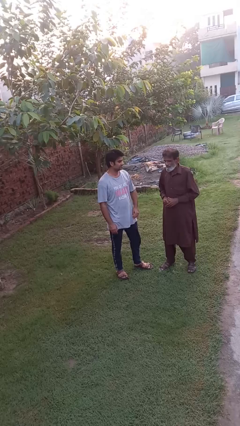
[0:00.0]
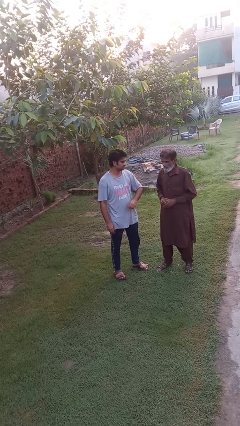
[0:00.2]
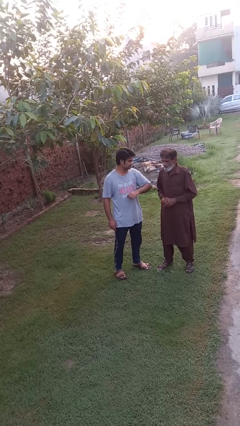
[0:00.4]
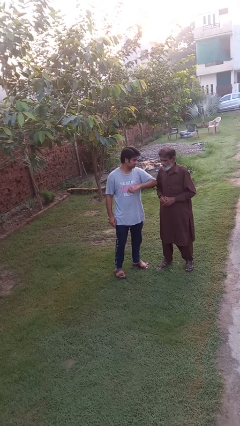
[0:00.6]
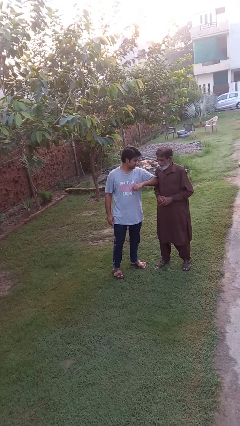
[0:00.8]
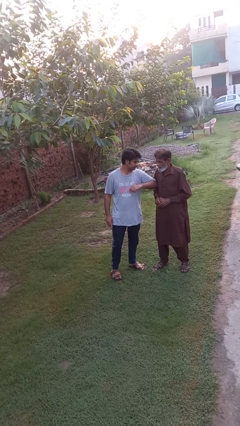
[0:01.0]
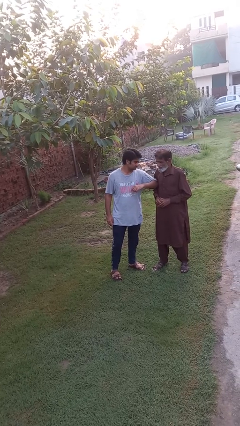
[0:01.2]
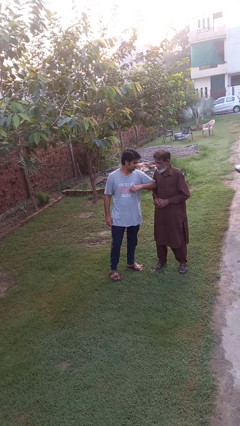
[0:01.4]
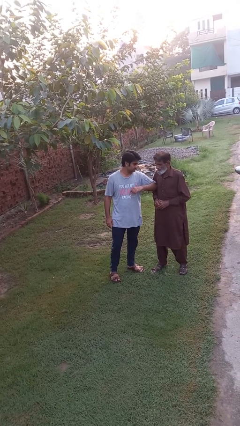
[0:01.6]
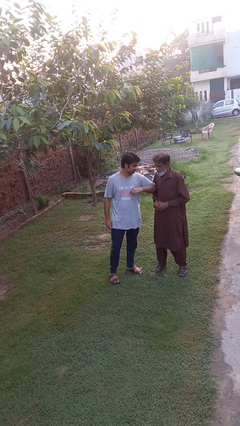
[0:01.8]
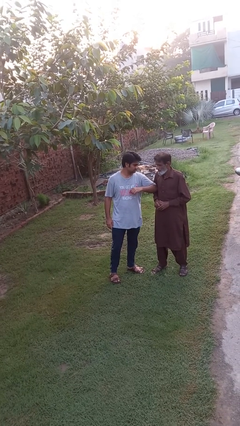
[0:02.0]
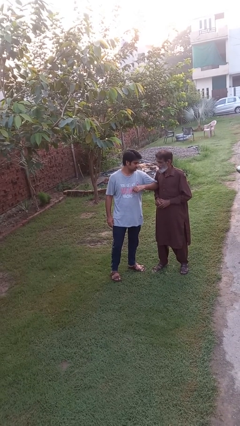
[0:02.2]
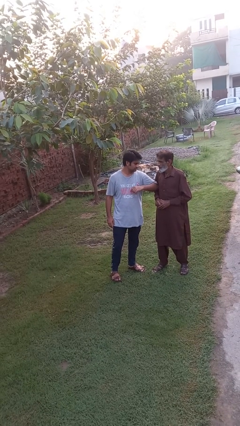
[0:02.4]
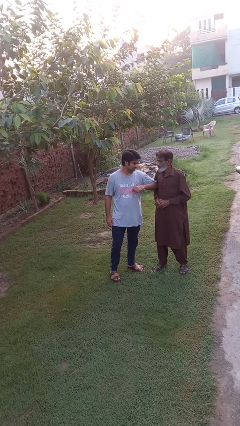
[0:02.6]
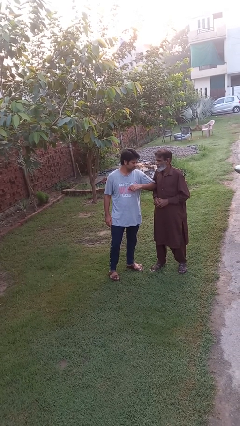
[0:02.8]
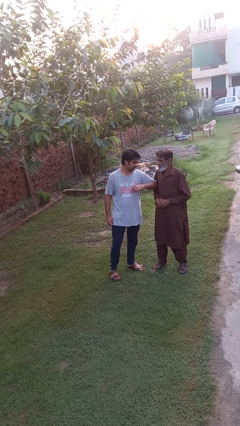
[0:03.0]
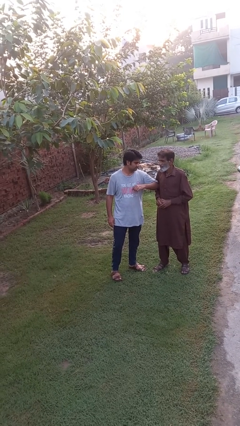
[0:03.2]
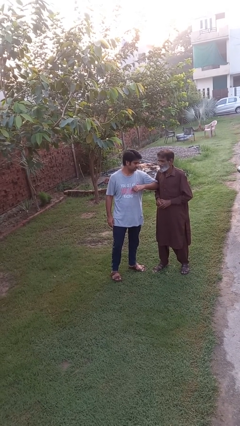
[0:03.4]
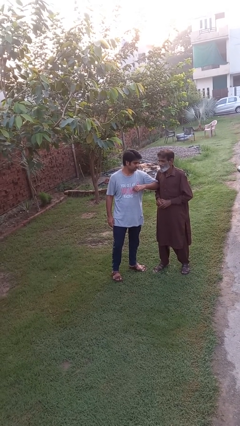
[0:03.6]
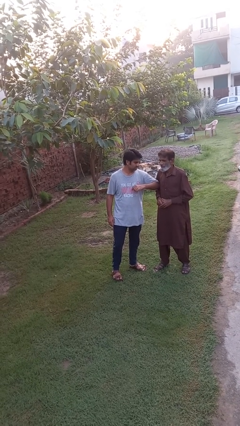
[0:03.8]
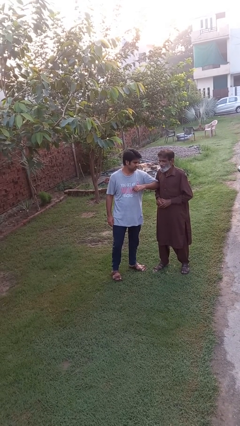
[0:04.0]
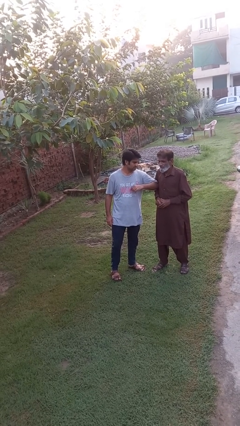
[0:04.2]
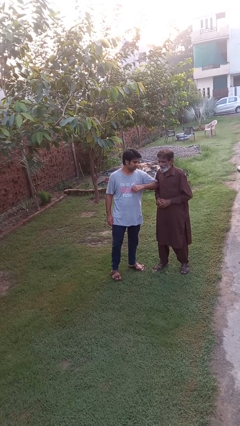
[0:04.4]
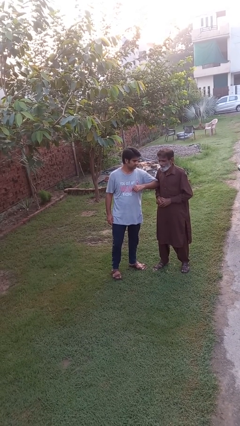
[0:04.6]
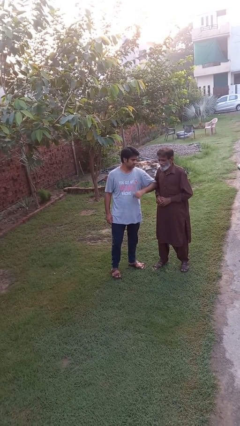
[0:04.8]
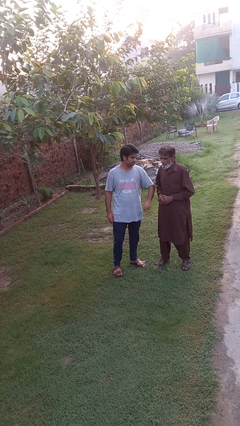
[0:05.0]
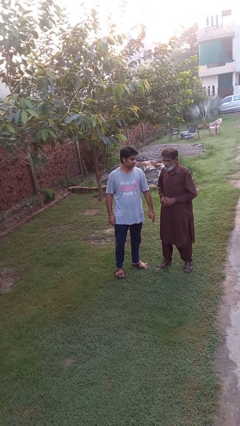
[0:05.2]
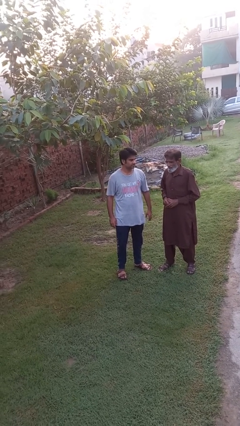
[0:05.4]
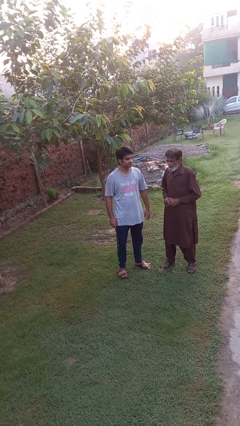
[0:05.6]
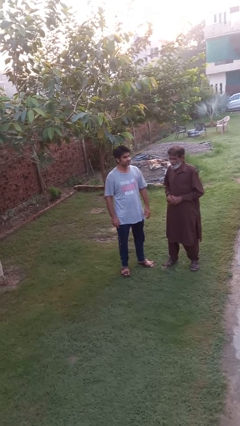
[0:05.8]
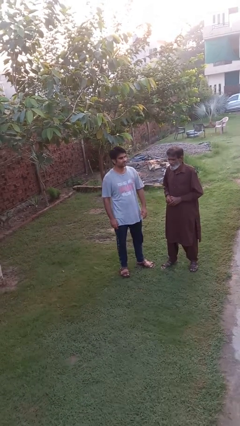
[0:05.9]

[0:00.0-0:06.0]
person nudges person with elbow

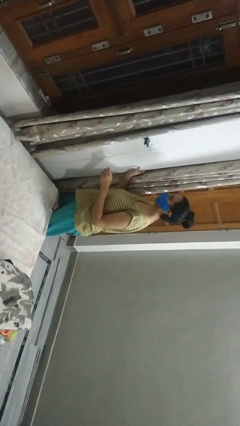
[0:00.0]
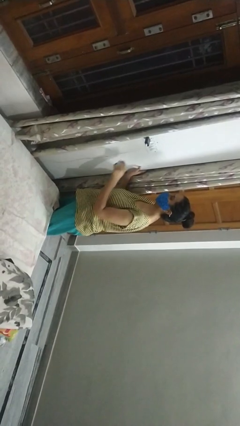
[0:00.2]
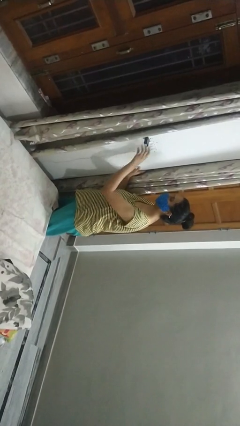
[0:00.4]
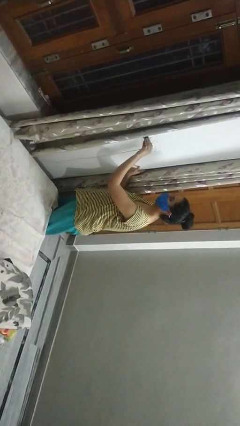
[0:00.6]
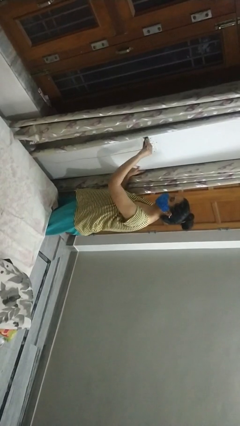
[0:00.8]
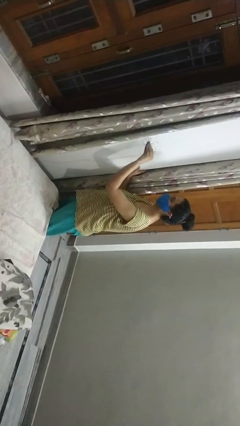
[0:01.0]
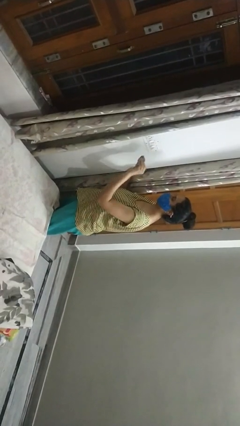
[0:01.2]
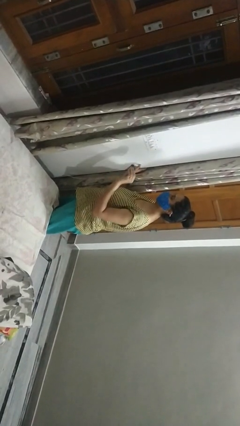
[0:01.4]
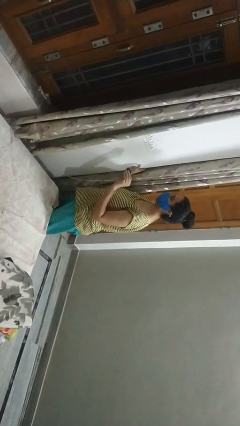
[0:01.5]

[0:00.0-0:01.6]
person unplugs from electrical socket

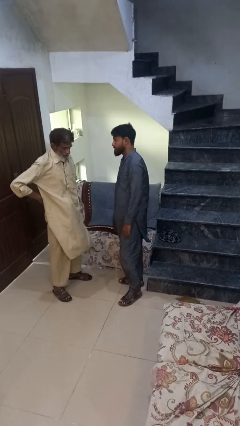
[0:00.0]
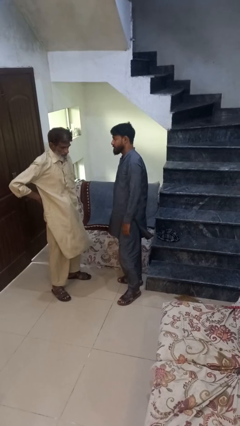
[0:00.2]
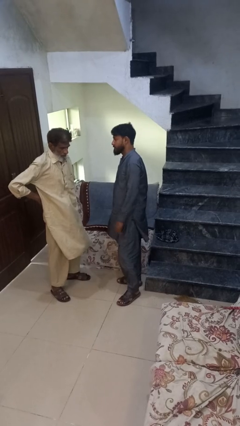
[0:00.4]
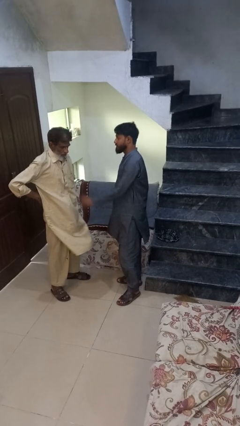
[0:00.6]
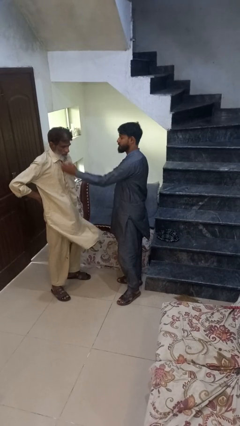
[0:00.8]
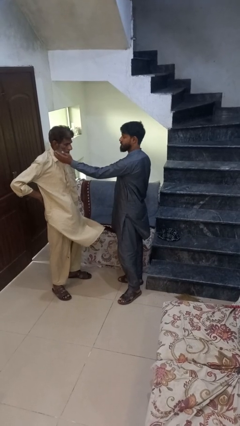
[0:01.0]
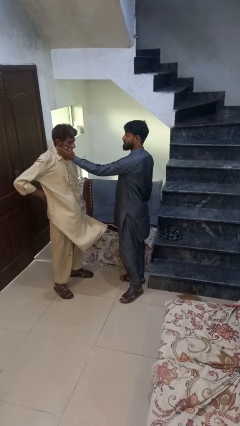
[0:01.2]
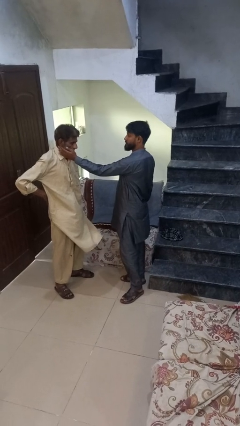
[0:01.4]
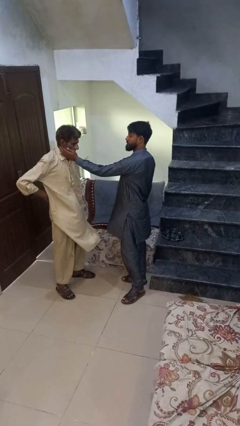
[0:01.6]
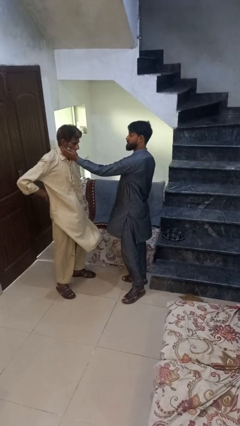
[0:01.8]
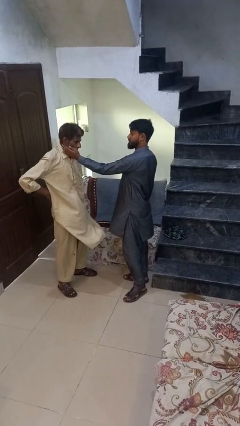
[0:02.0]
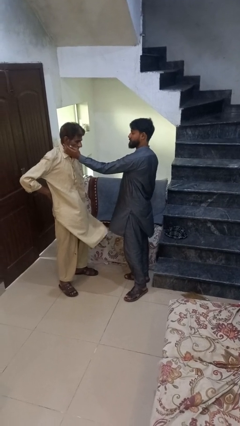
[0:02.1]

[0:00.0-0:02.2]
person touches face of person

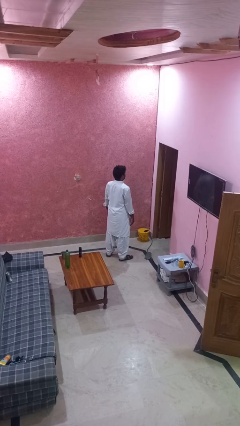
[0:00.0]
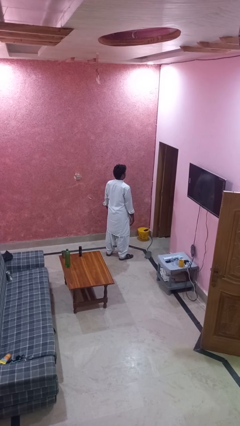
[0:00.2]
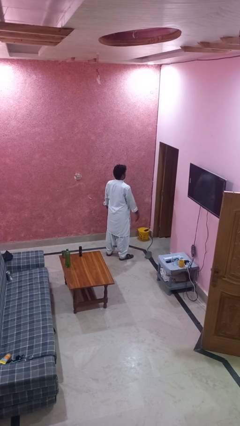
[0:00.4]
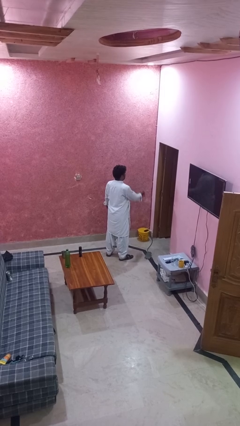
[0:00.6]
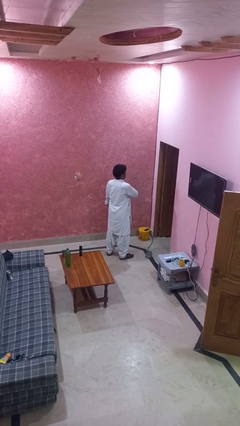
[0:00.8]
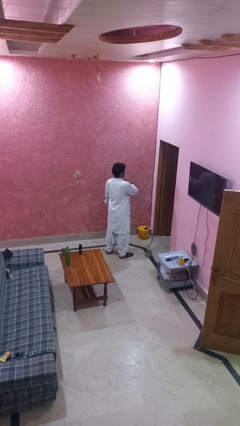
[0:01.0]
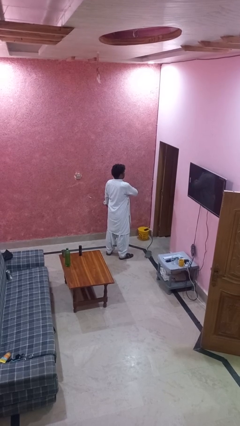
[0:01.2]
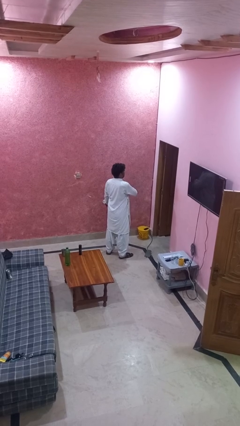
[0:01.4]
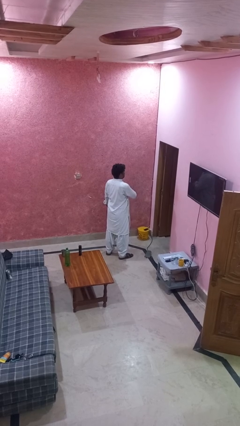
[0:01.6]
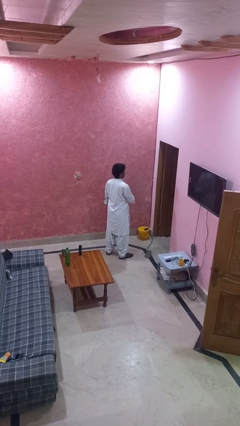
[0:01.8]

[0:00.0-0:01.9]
person drums on chest

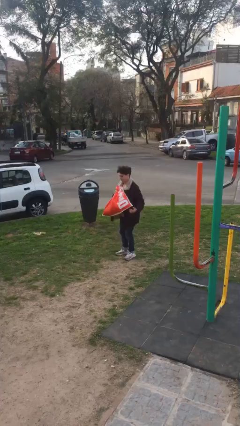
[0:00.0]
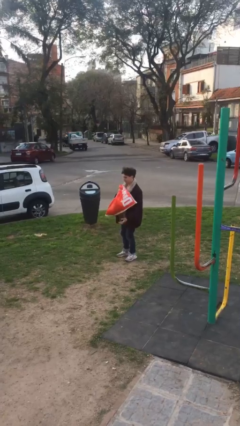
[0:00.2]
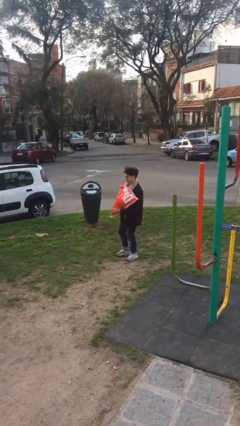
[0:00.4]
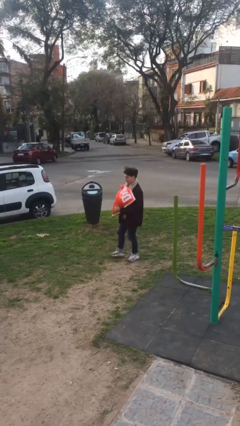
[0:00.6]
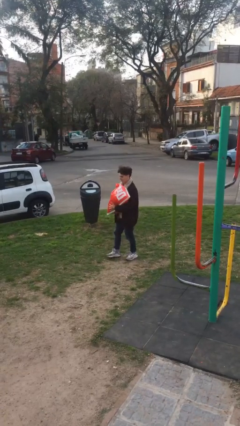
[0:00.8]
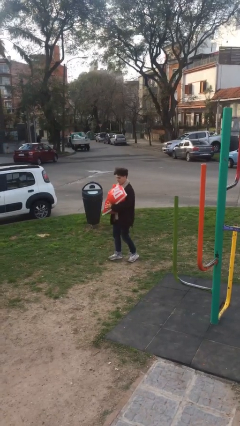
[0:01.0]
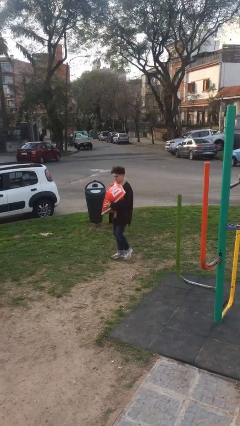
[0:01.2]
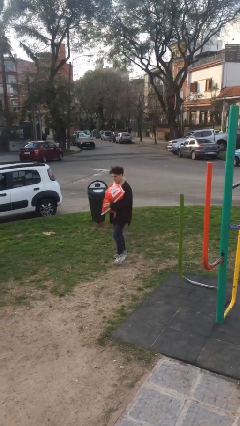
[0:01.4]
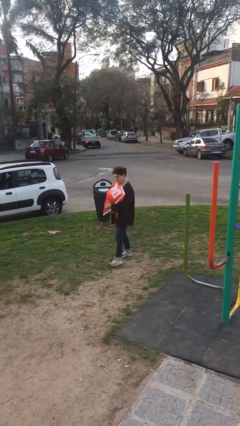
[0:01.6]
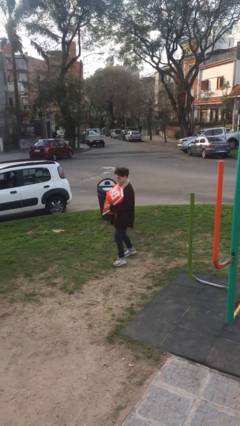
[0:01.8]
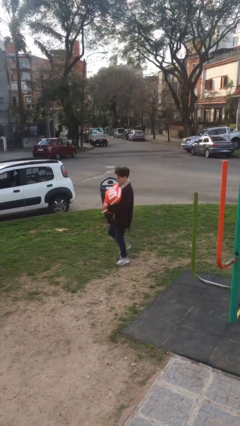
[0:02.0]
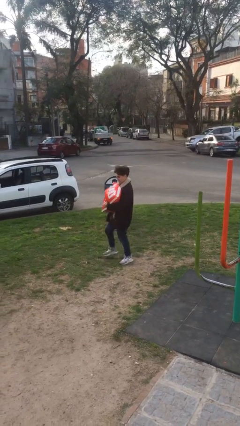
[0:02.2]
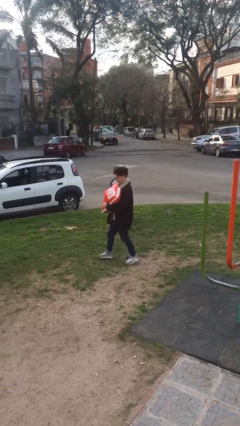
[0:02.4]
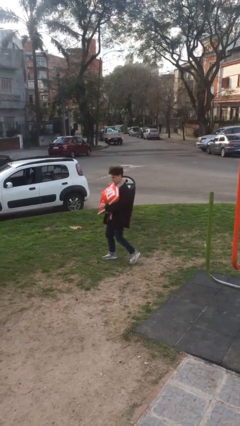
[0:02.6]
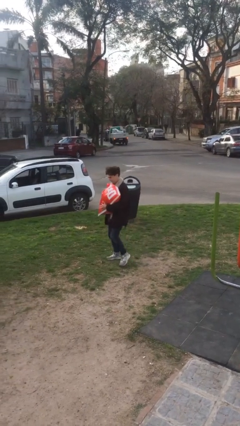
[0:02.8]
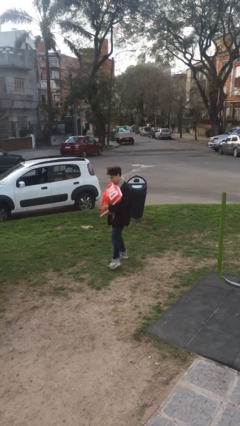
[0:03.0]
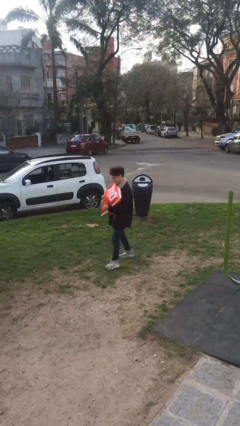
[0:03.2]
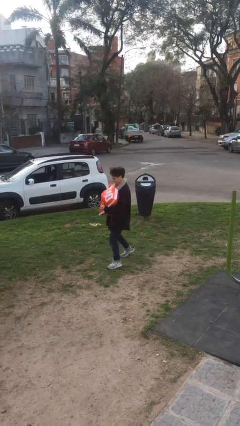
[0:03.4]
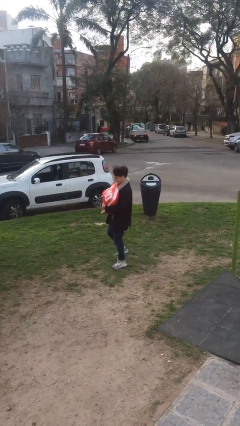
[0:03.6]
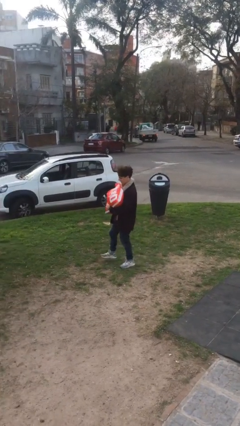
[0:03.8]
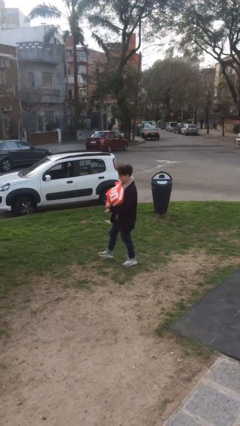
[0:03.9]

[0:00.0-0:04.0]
person carries heavy object

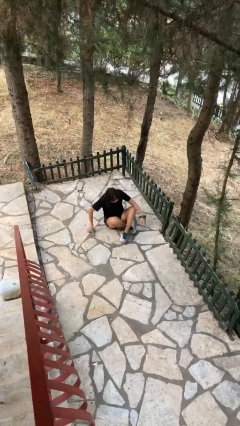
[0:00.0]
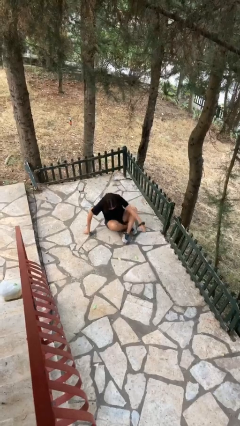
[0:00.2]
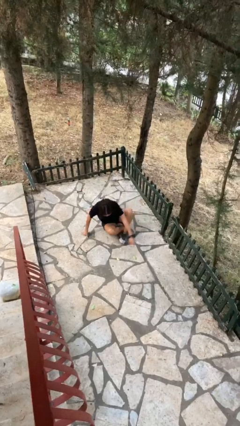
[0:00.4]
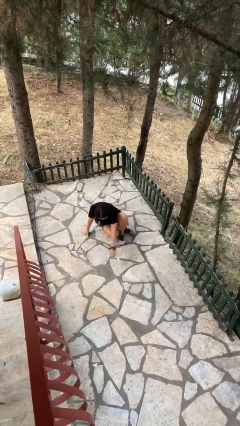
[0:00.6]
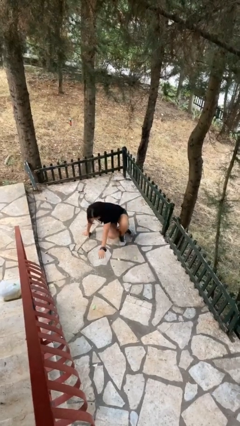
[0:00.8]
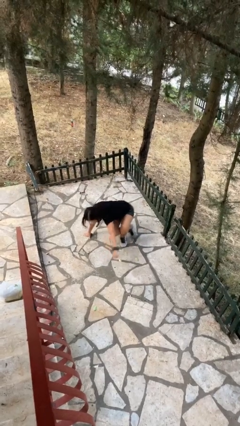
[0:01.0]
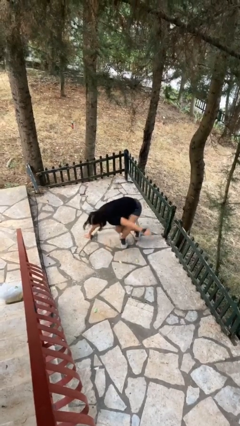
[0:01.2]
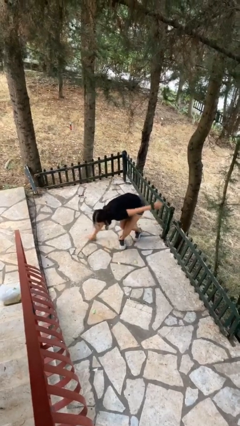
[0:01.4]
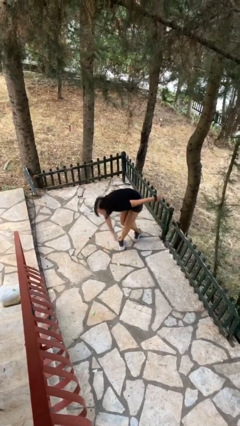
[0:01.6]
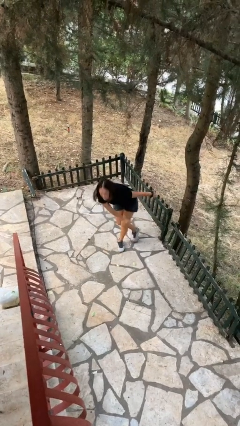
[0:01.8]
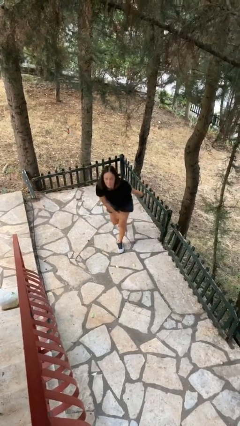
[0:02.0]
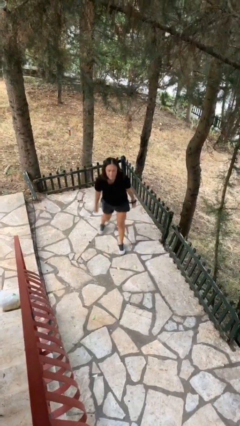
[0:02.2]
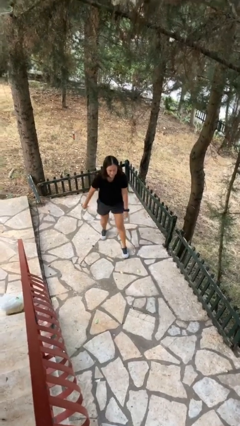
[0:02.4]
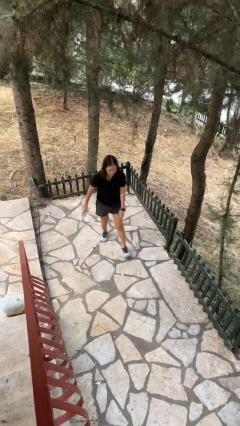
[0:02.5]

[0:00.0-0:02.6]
person stands up from floor
